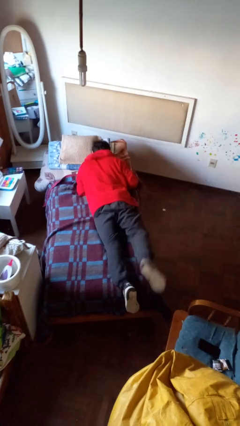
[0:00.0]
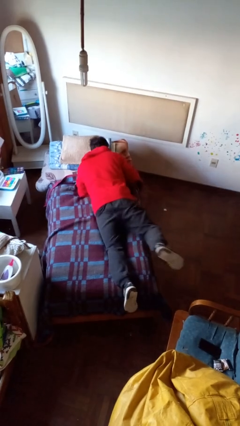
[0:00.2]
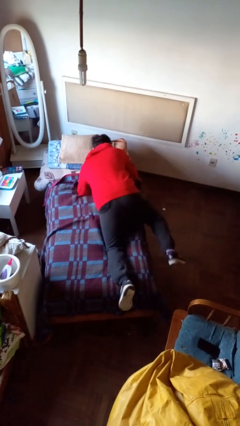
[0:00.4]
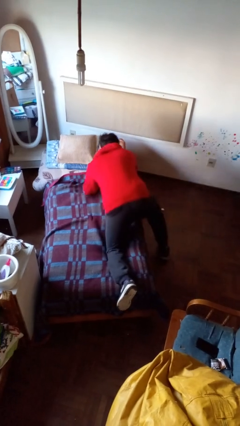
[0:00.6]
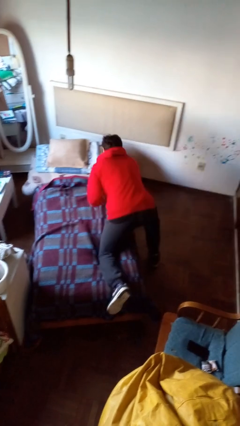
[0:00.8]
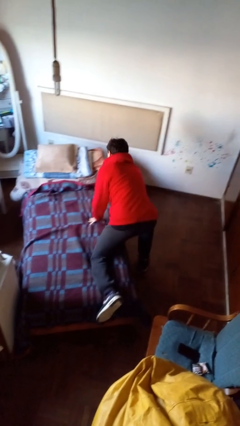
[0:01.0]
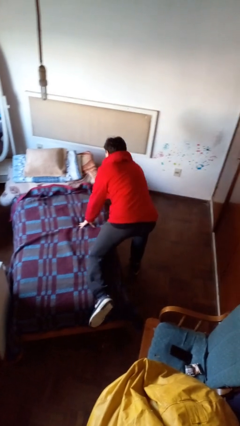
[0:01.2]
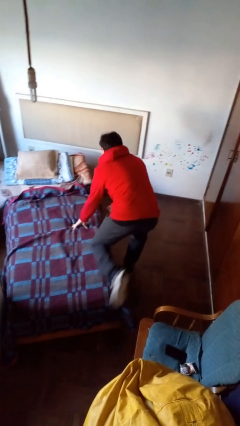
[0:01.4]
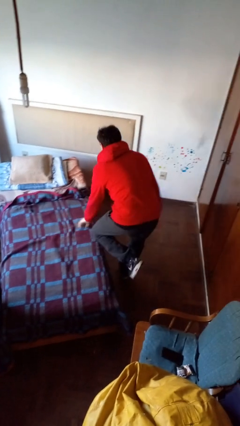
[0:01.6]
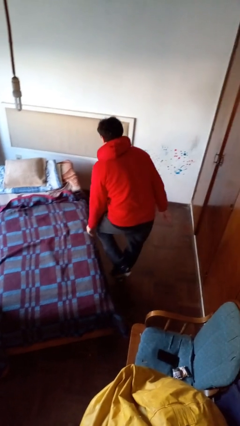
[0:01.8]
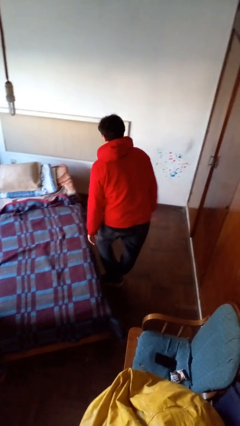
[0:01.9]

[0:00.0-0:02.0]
person stands up

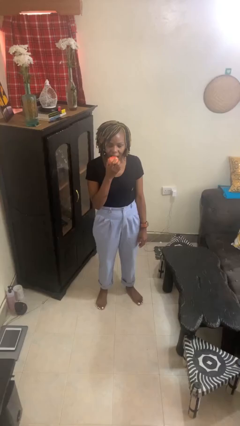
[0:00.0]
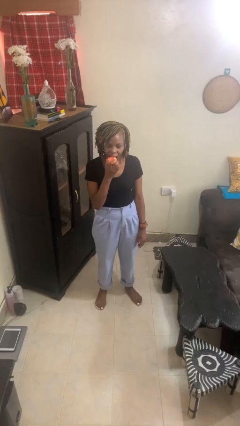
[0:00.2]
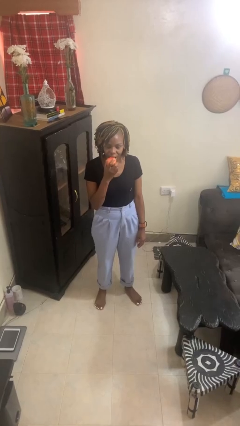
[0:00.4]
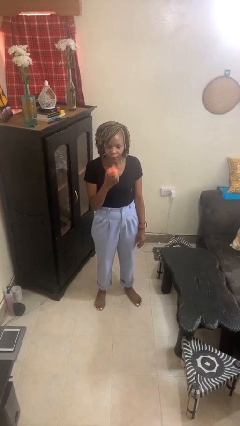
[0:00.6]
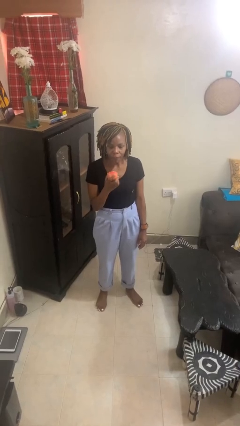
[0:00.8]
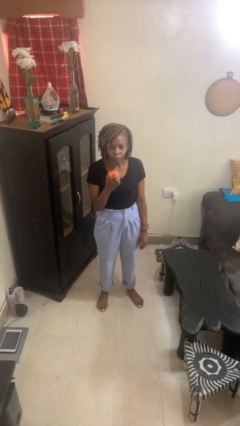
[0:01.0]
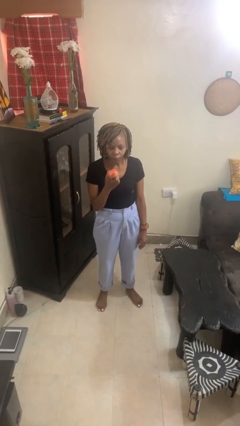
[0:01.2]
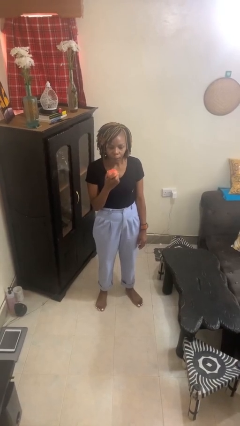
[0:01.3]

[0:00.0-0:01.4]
person eats apple

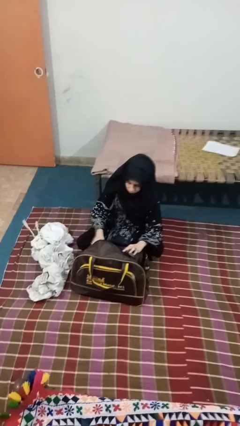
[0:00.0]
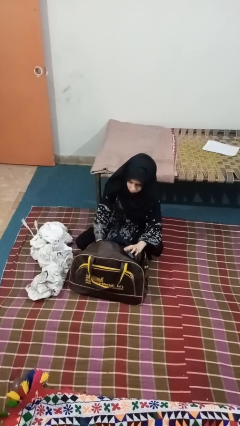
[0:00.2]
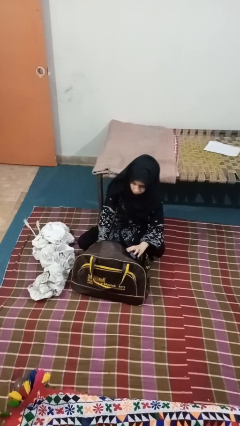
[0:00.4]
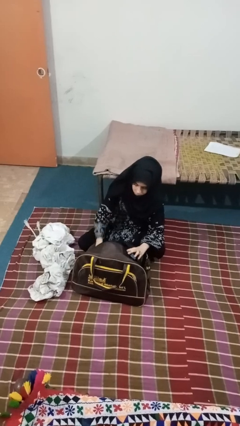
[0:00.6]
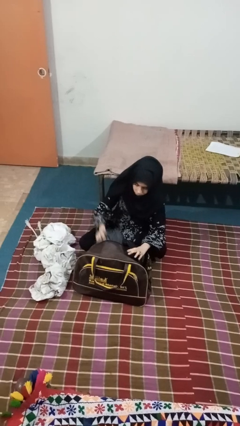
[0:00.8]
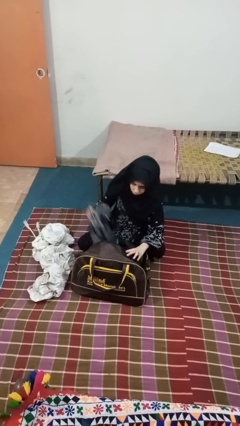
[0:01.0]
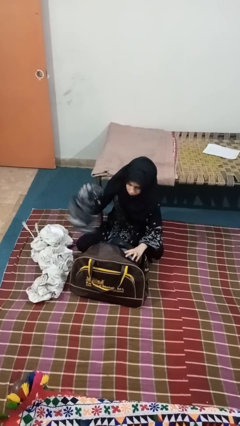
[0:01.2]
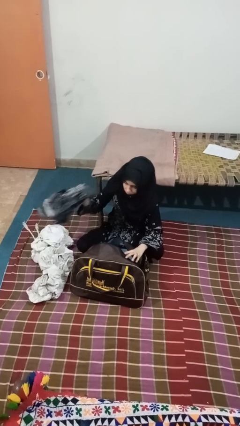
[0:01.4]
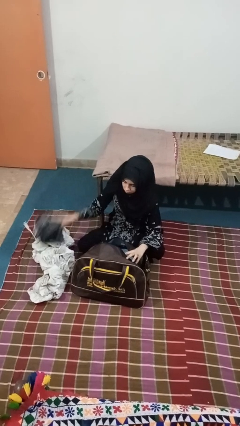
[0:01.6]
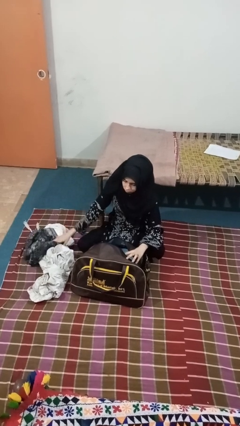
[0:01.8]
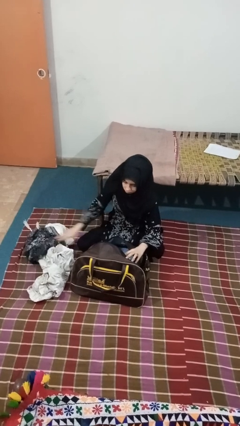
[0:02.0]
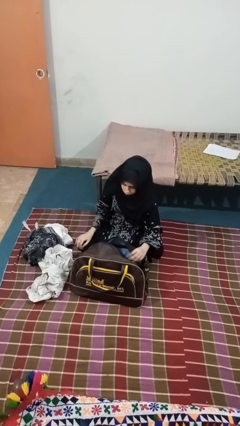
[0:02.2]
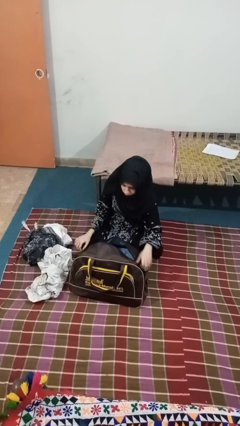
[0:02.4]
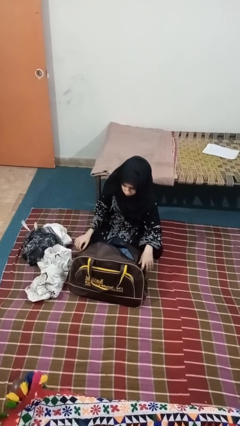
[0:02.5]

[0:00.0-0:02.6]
person unloads clothes from suitcase

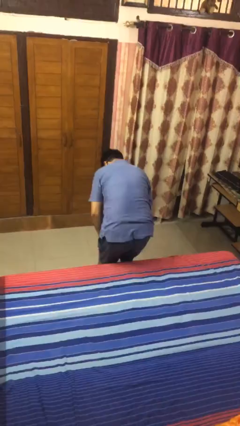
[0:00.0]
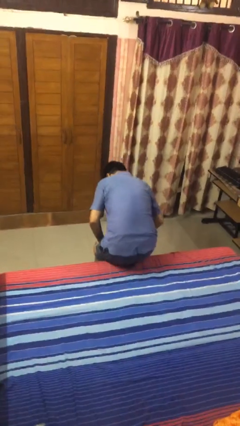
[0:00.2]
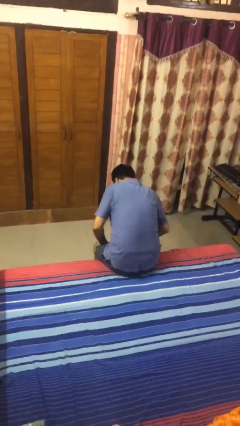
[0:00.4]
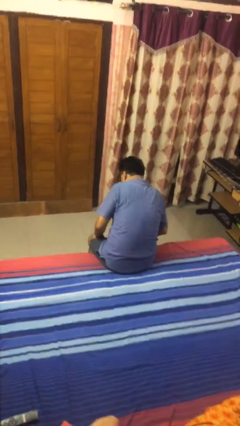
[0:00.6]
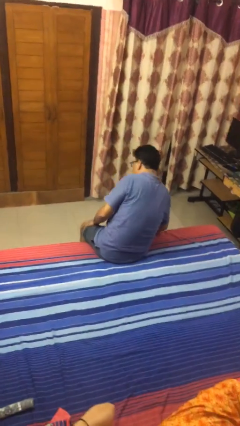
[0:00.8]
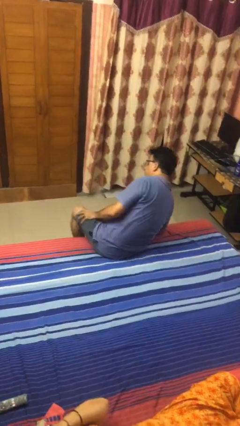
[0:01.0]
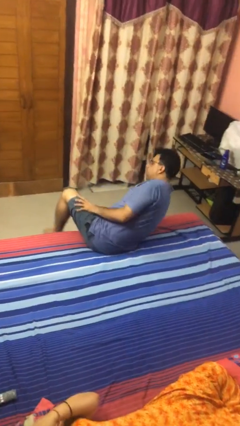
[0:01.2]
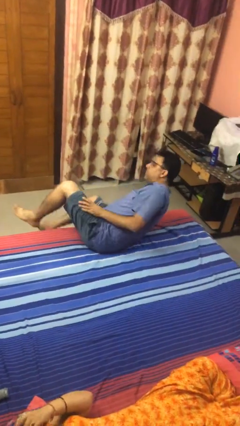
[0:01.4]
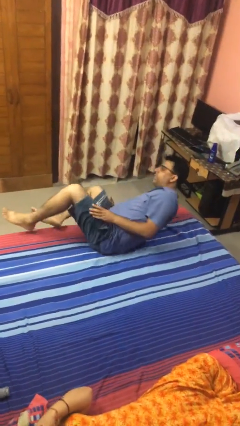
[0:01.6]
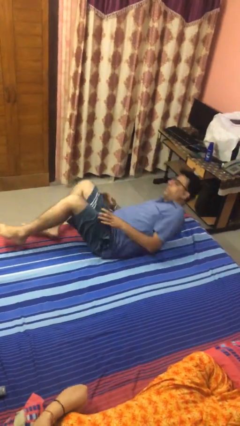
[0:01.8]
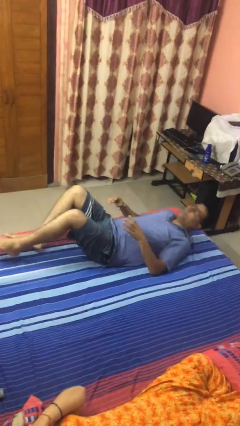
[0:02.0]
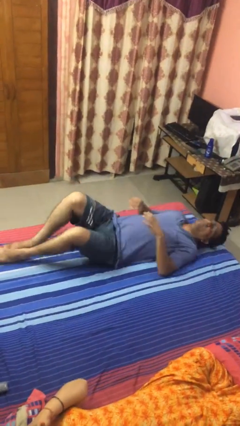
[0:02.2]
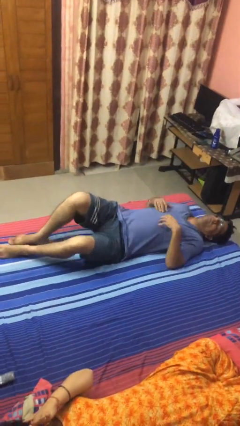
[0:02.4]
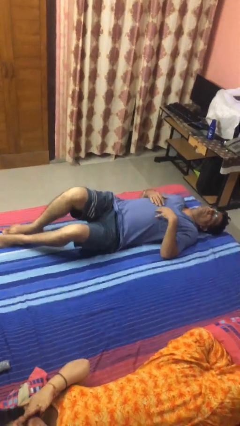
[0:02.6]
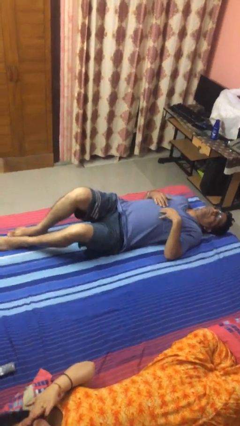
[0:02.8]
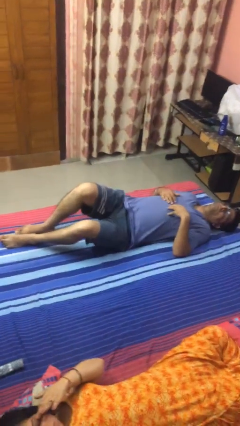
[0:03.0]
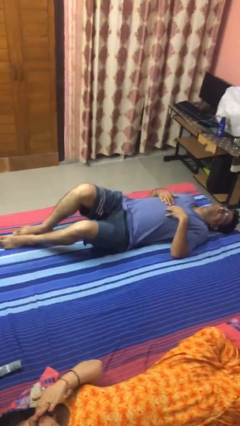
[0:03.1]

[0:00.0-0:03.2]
person lies down on bed

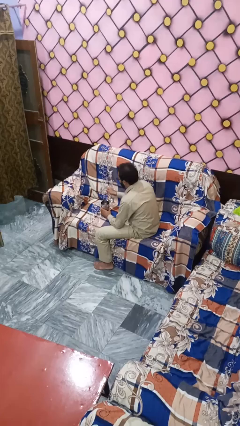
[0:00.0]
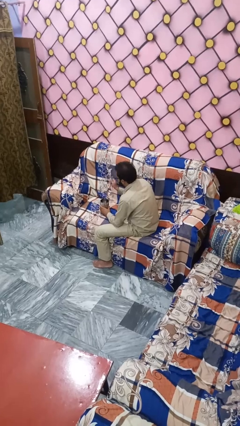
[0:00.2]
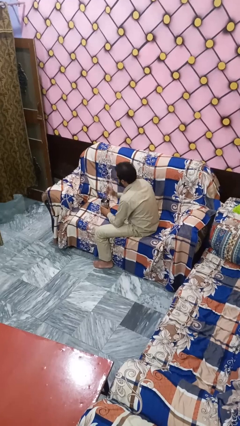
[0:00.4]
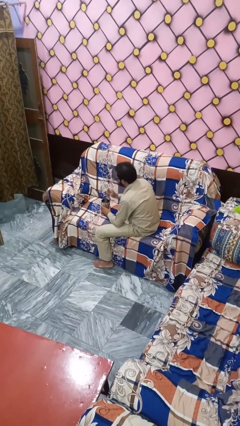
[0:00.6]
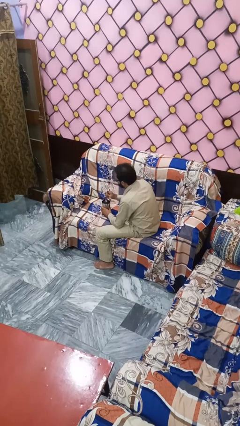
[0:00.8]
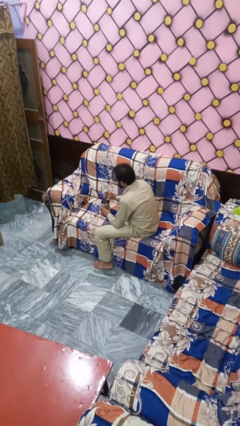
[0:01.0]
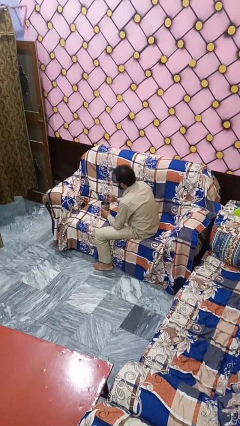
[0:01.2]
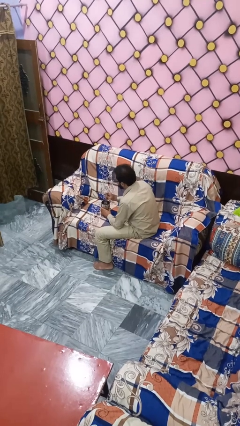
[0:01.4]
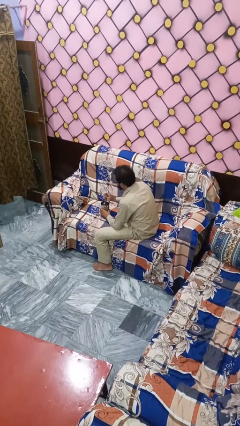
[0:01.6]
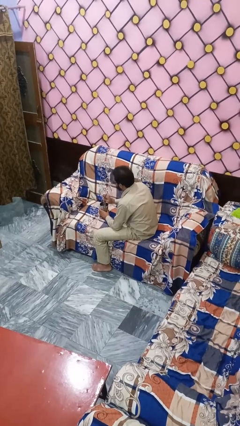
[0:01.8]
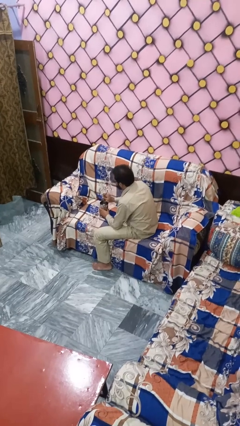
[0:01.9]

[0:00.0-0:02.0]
person stirs mug

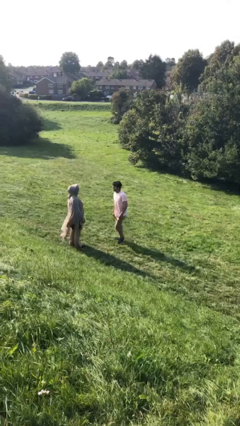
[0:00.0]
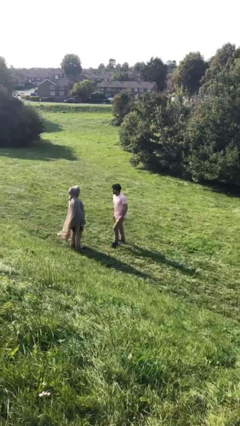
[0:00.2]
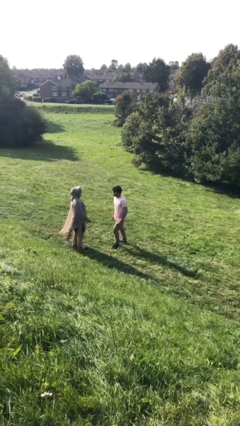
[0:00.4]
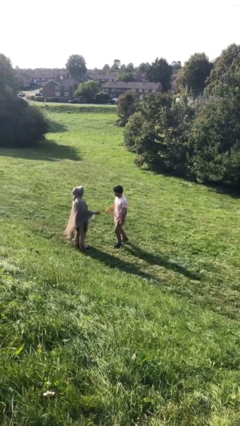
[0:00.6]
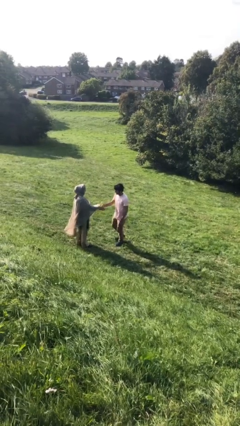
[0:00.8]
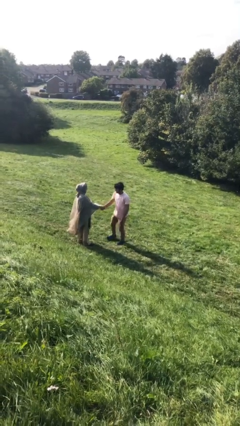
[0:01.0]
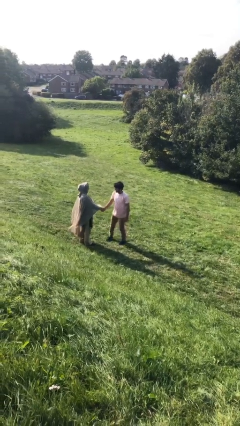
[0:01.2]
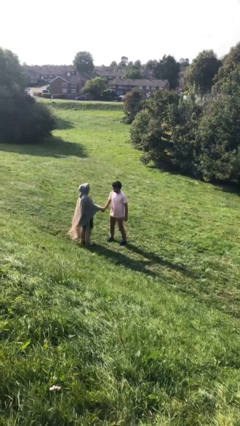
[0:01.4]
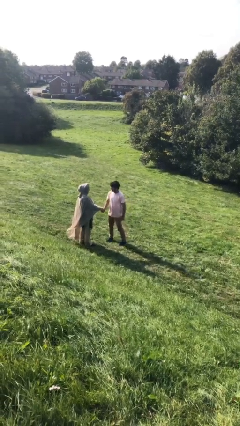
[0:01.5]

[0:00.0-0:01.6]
person shakes hand

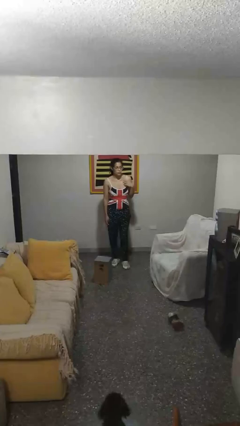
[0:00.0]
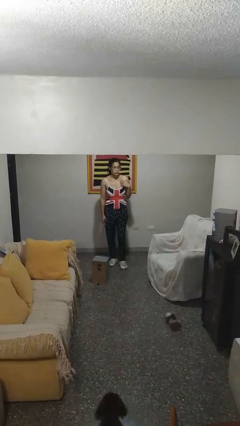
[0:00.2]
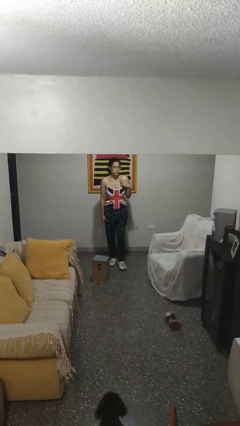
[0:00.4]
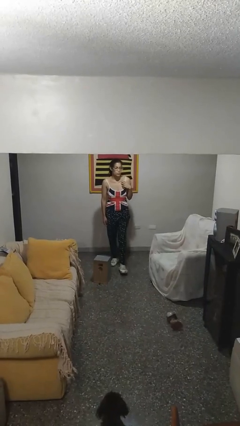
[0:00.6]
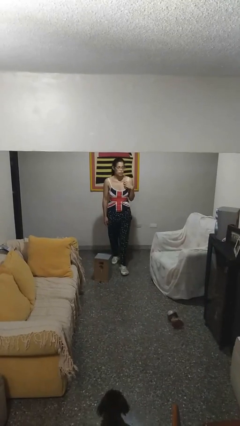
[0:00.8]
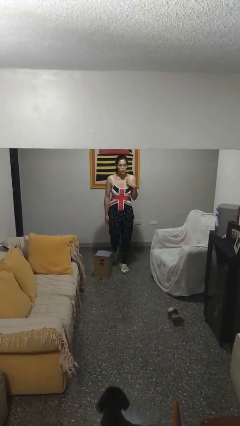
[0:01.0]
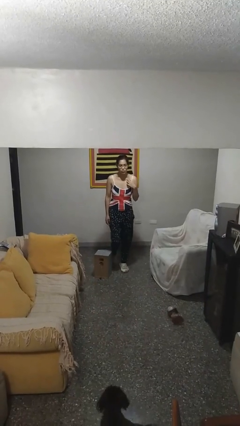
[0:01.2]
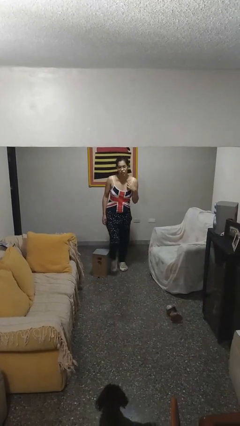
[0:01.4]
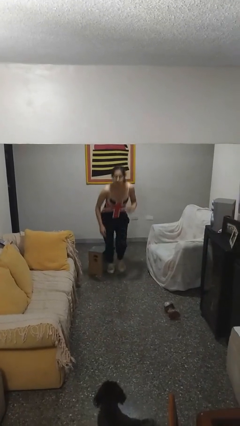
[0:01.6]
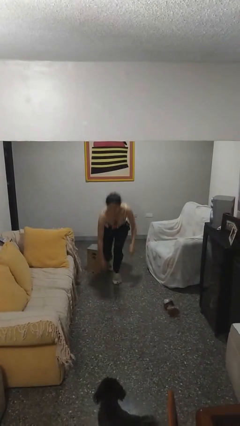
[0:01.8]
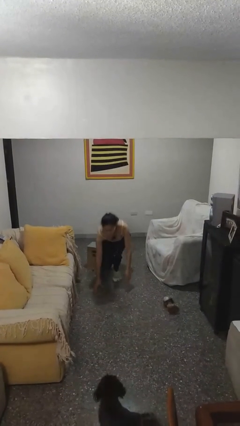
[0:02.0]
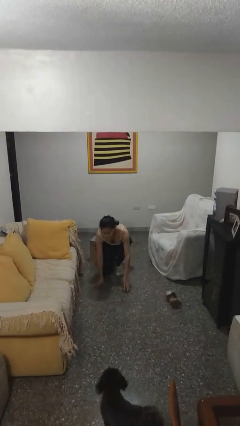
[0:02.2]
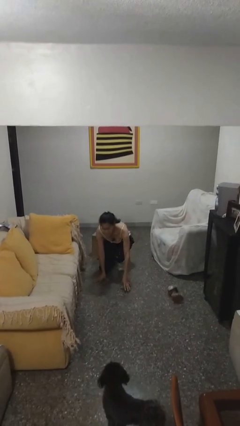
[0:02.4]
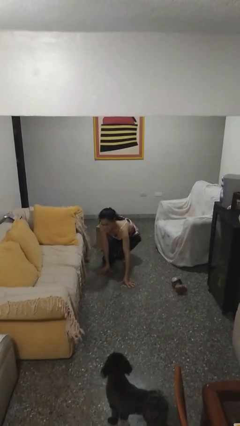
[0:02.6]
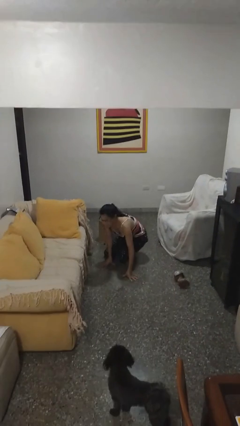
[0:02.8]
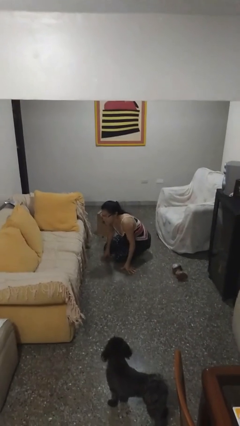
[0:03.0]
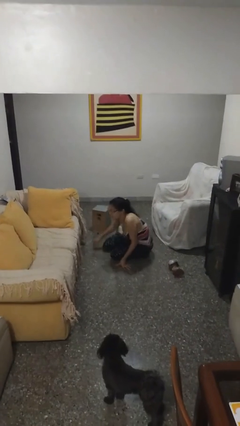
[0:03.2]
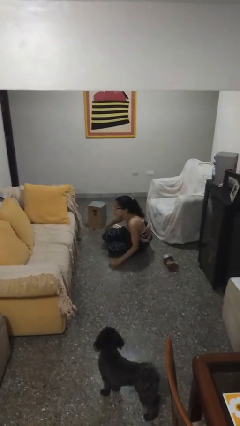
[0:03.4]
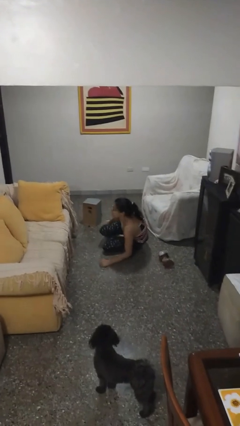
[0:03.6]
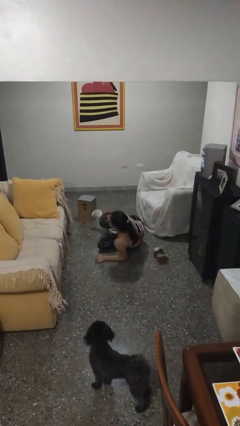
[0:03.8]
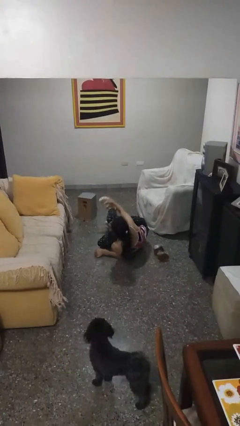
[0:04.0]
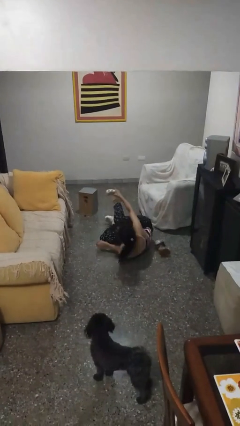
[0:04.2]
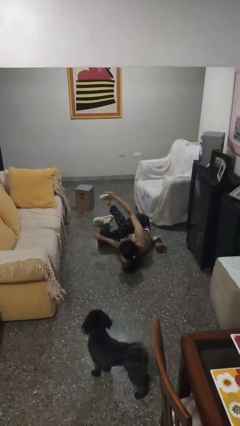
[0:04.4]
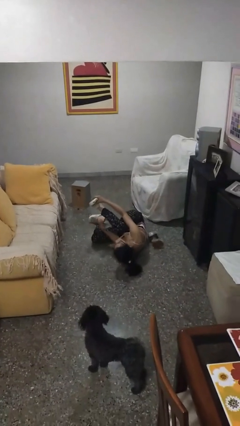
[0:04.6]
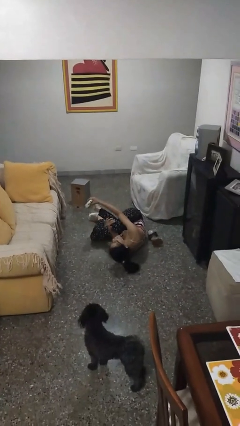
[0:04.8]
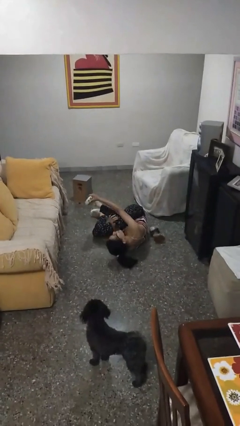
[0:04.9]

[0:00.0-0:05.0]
person trips on object on floor
